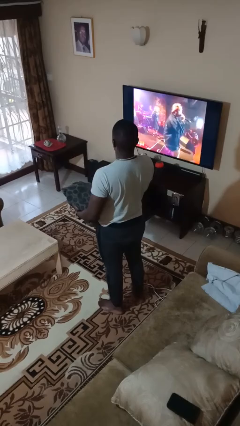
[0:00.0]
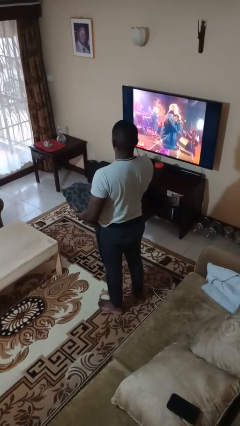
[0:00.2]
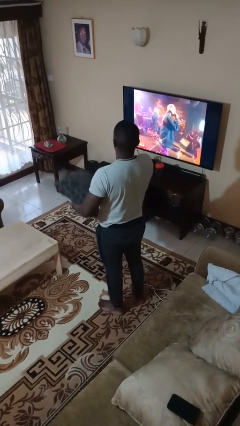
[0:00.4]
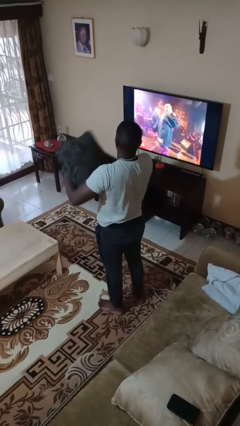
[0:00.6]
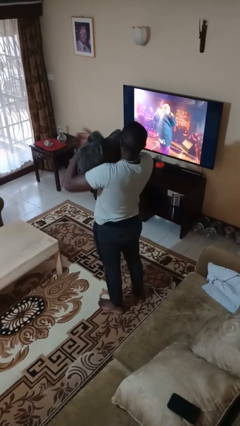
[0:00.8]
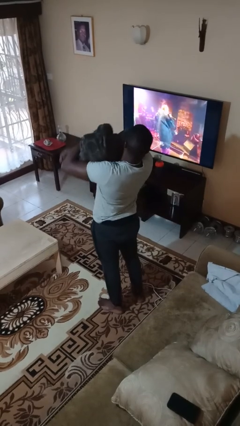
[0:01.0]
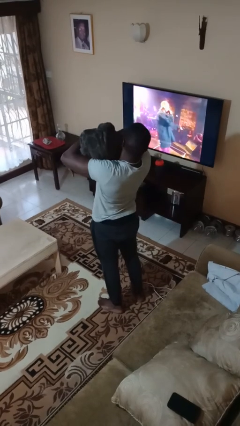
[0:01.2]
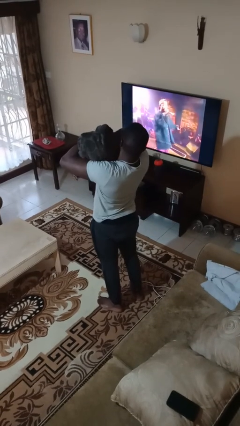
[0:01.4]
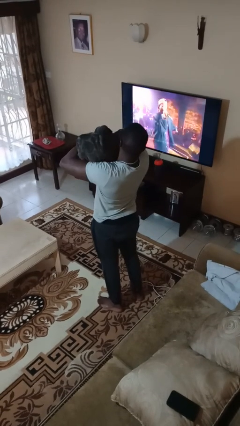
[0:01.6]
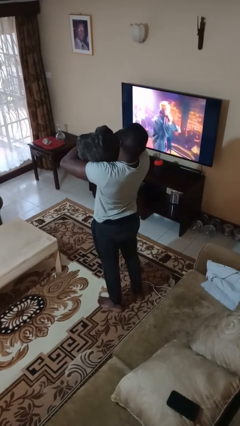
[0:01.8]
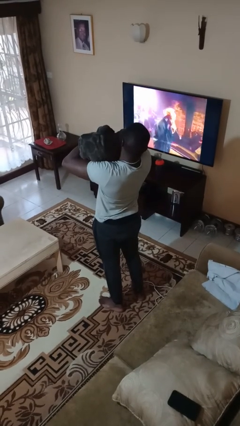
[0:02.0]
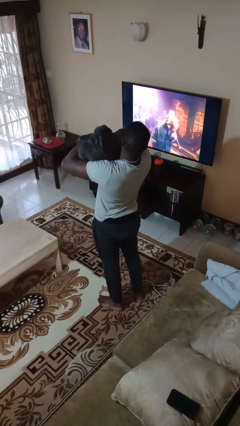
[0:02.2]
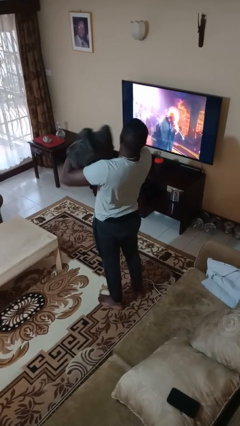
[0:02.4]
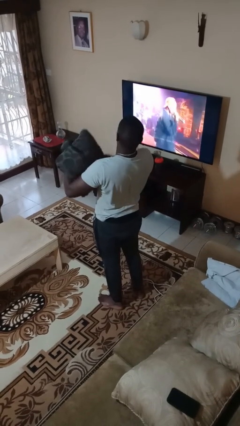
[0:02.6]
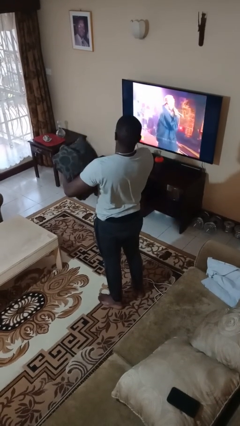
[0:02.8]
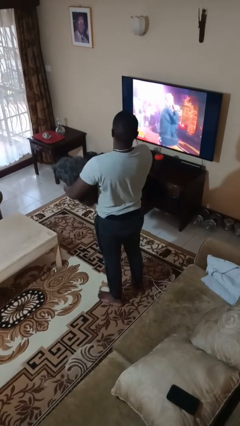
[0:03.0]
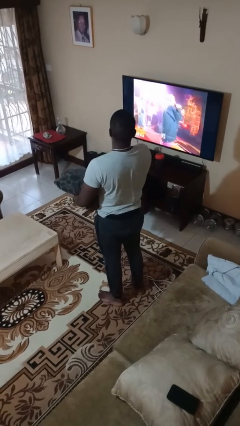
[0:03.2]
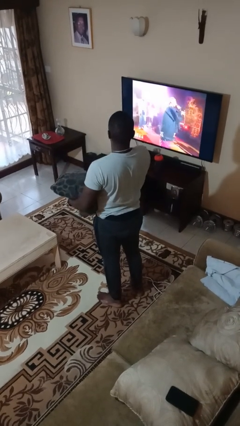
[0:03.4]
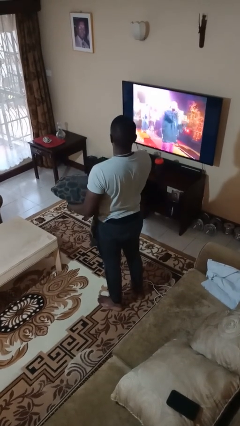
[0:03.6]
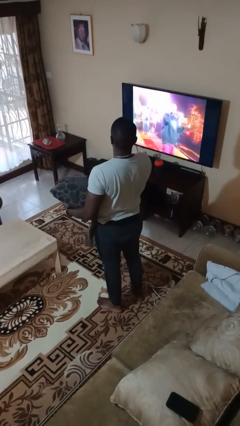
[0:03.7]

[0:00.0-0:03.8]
person hugs stuffed animal

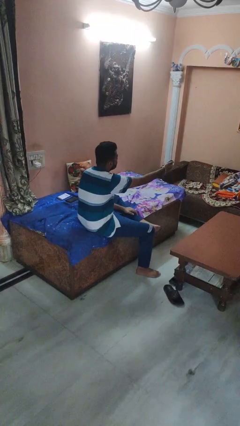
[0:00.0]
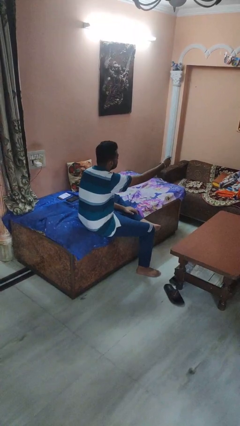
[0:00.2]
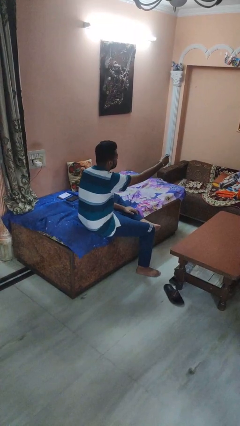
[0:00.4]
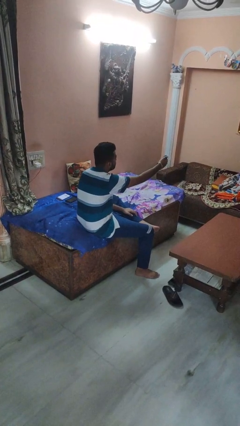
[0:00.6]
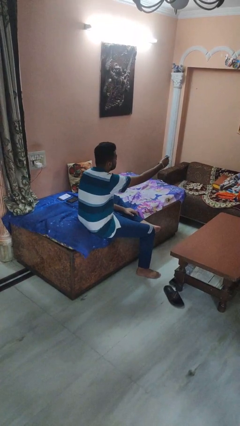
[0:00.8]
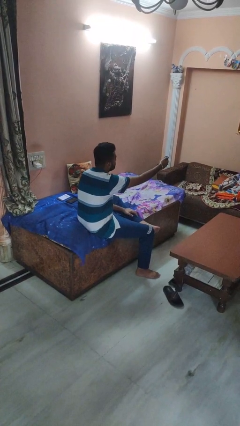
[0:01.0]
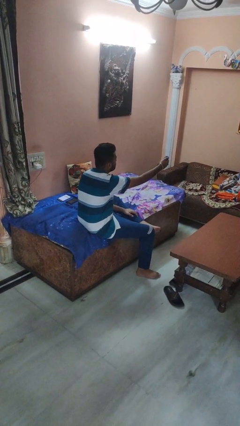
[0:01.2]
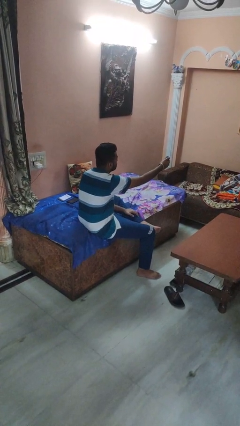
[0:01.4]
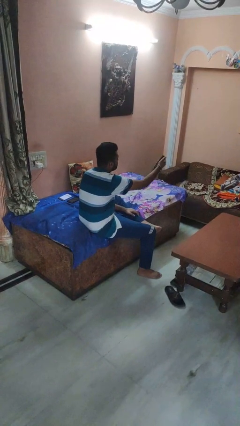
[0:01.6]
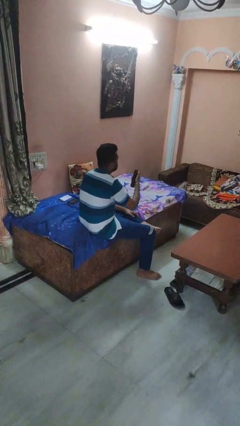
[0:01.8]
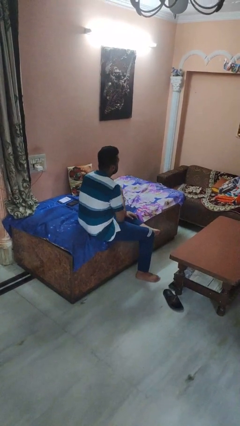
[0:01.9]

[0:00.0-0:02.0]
person uses television remote

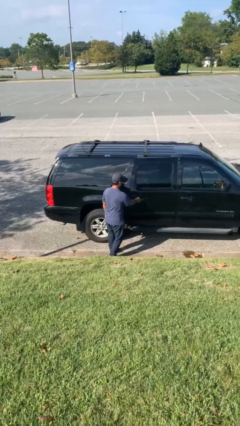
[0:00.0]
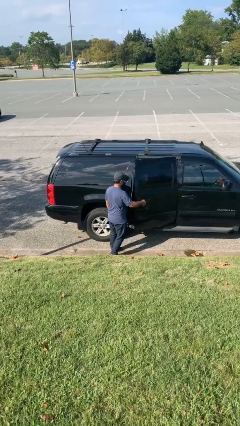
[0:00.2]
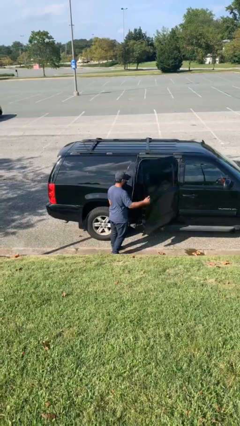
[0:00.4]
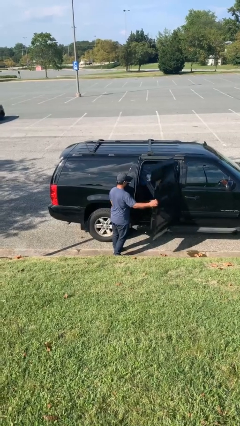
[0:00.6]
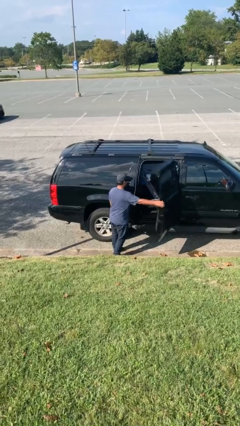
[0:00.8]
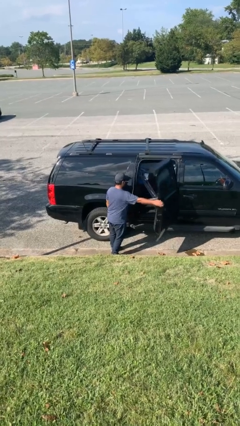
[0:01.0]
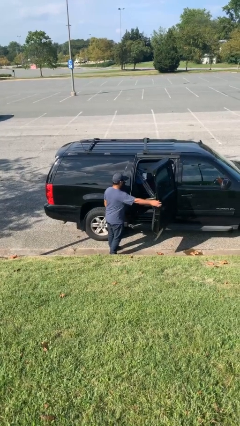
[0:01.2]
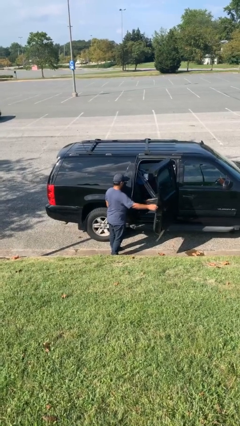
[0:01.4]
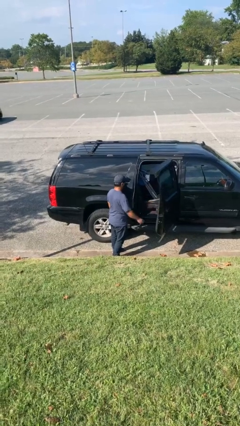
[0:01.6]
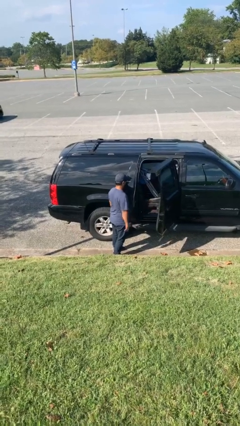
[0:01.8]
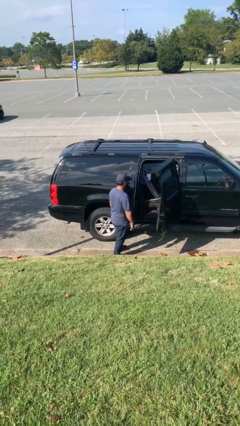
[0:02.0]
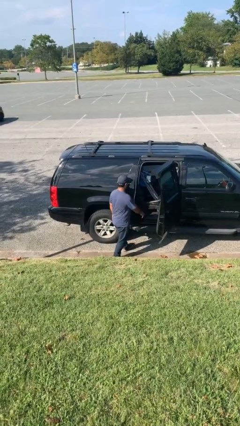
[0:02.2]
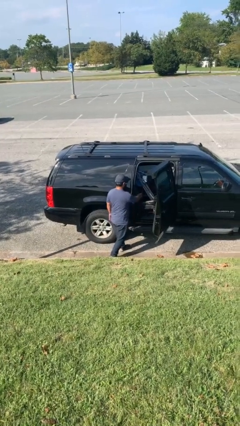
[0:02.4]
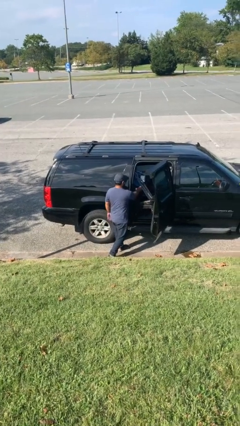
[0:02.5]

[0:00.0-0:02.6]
person opens car door

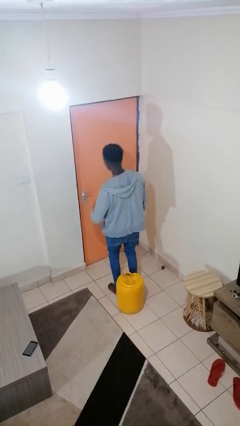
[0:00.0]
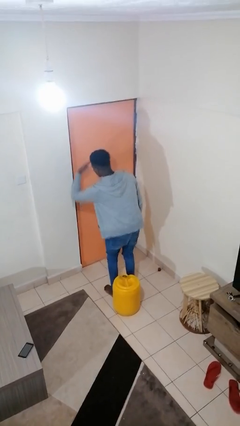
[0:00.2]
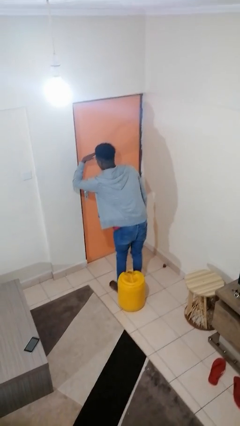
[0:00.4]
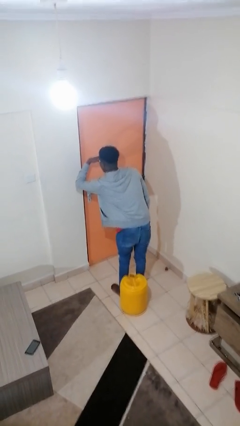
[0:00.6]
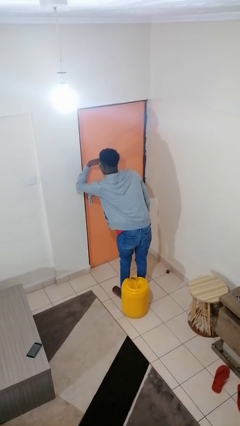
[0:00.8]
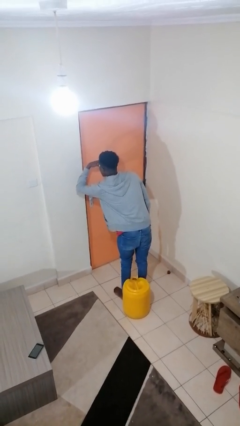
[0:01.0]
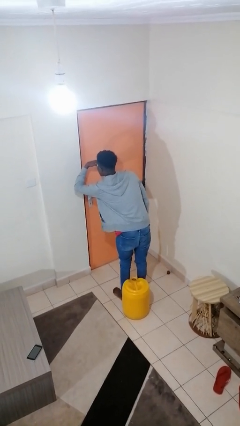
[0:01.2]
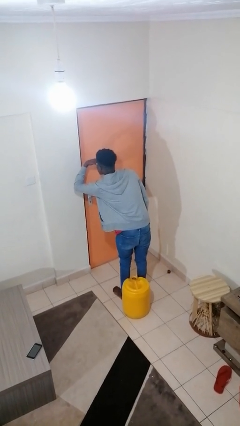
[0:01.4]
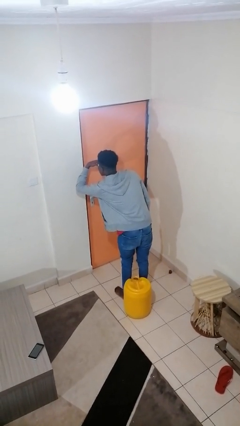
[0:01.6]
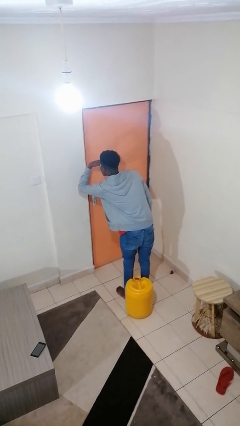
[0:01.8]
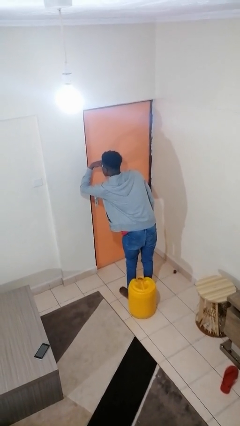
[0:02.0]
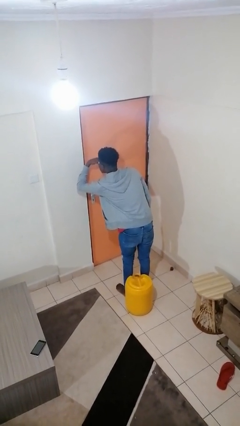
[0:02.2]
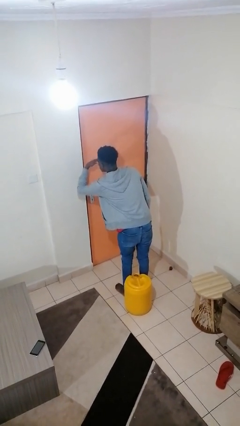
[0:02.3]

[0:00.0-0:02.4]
person shades eyes

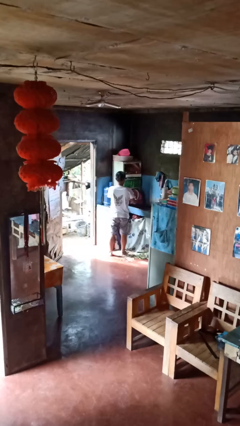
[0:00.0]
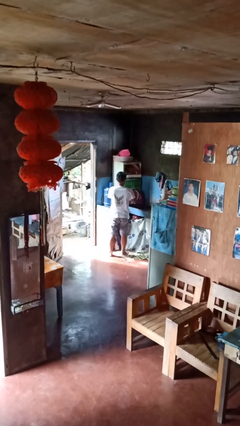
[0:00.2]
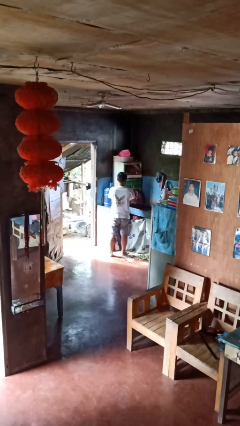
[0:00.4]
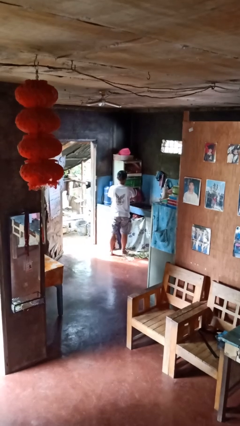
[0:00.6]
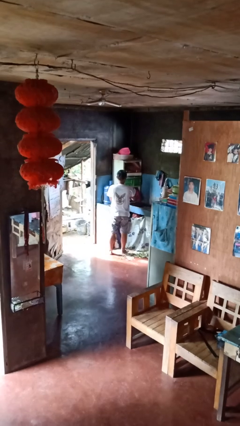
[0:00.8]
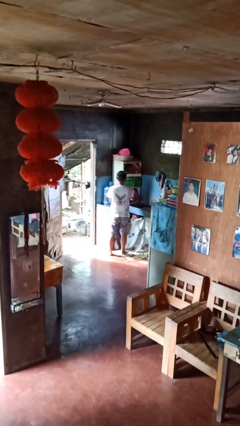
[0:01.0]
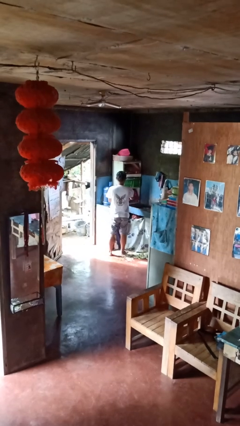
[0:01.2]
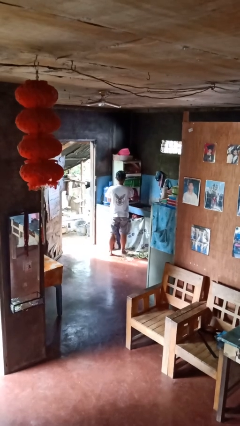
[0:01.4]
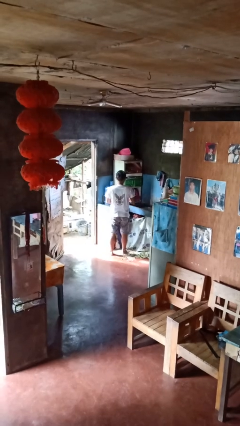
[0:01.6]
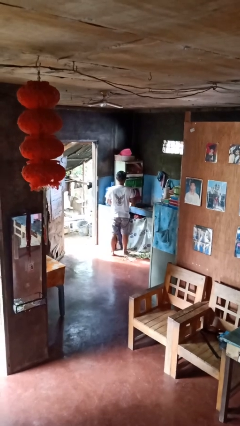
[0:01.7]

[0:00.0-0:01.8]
person closes dishwasher

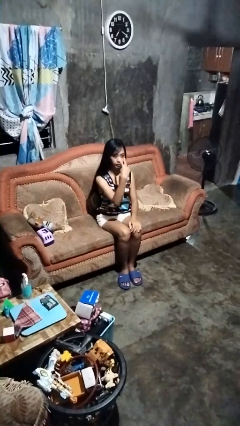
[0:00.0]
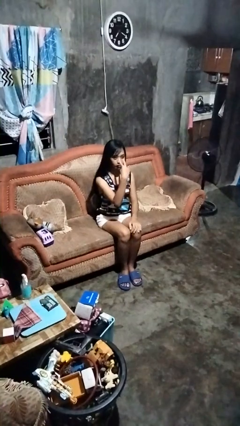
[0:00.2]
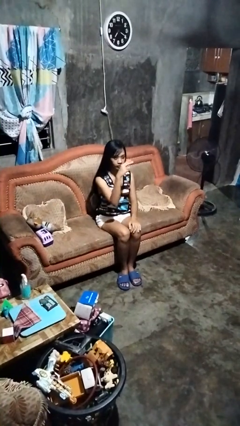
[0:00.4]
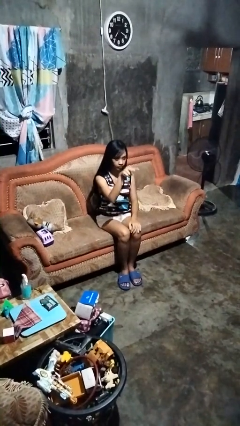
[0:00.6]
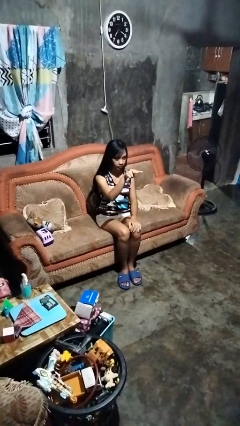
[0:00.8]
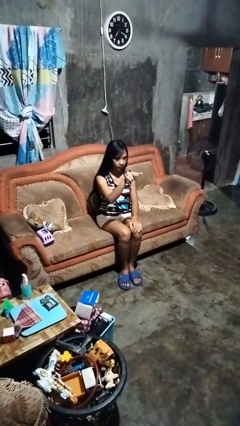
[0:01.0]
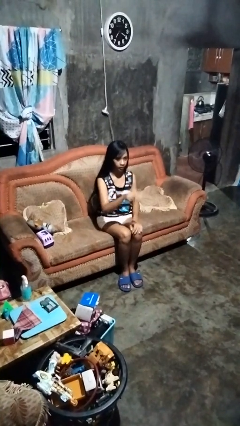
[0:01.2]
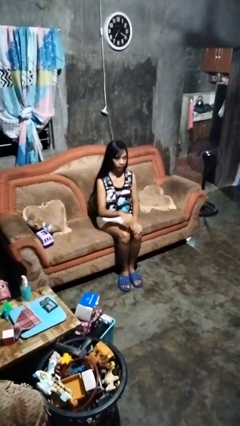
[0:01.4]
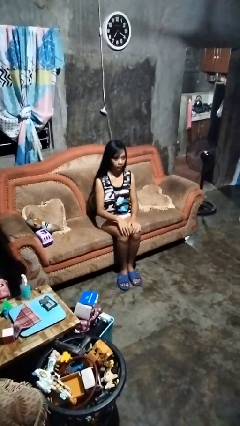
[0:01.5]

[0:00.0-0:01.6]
person gestures watch closely

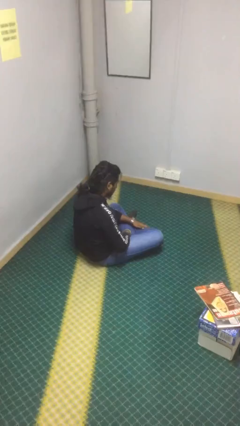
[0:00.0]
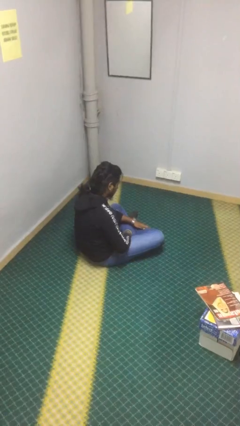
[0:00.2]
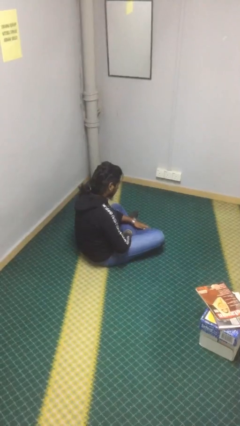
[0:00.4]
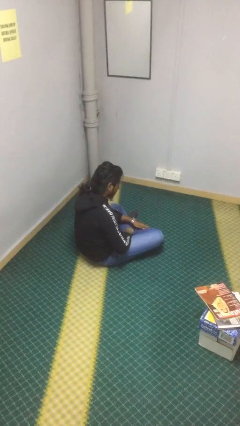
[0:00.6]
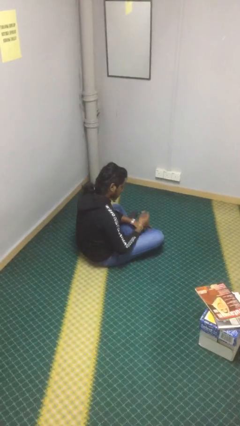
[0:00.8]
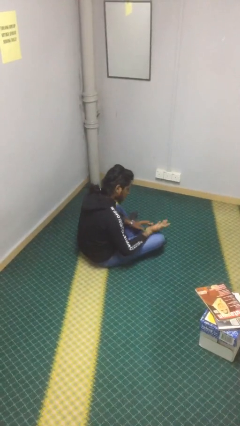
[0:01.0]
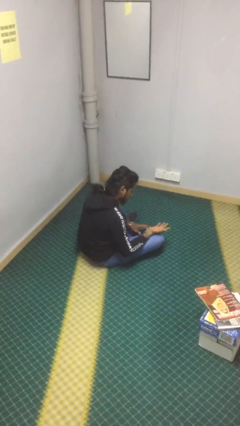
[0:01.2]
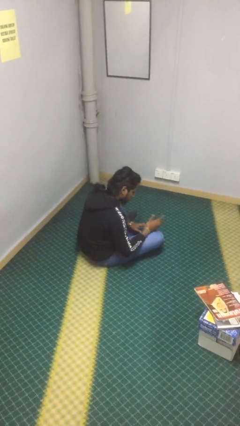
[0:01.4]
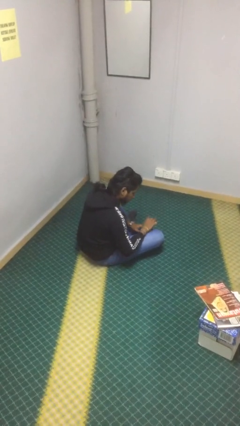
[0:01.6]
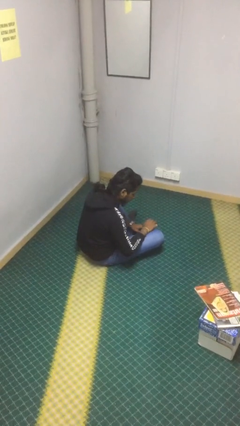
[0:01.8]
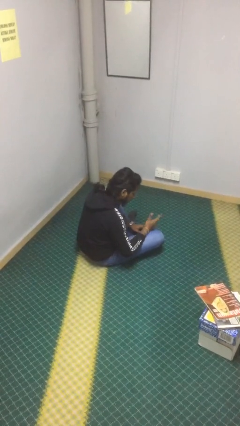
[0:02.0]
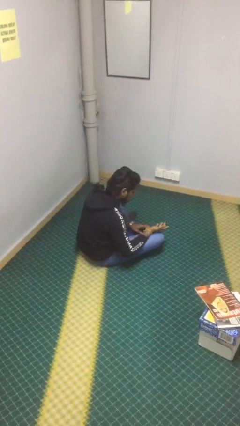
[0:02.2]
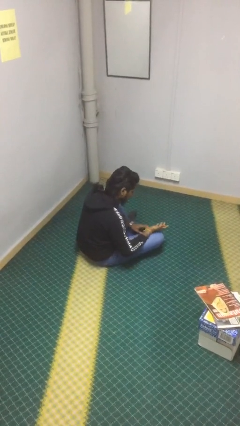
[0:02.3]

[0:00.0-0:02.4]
person looks at hands in lap

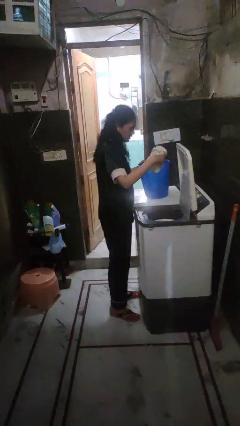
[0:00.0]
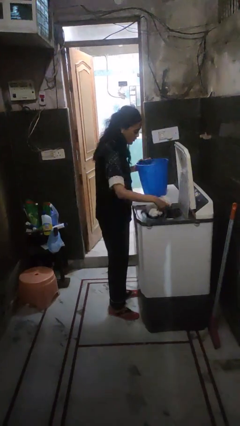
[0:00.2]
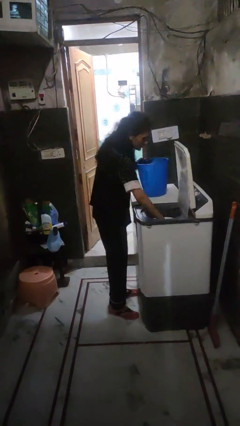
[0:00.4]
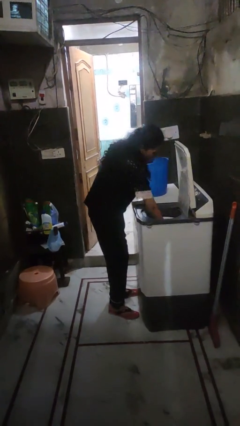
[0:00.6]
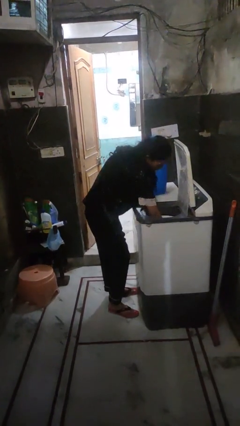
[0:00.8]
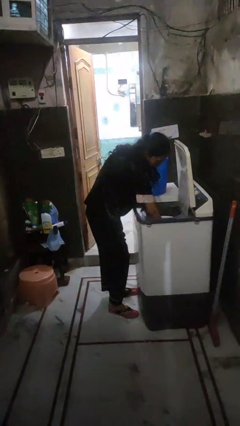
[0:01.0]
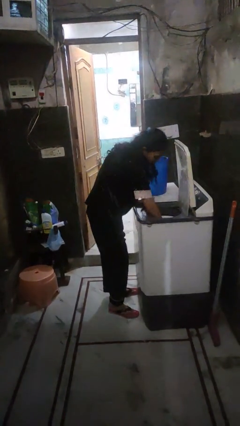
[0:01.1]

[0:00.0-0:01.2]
person loads dryer
